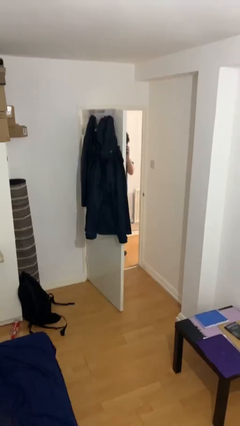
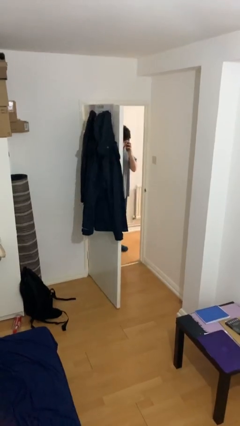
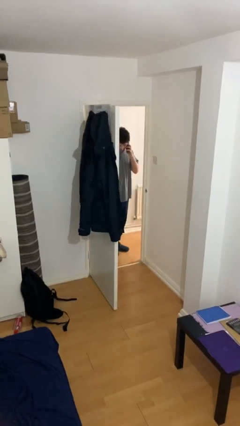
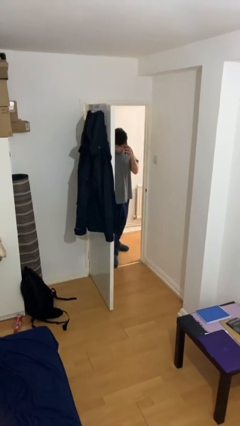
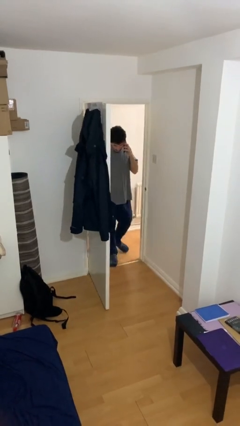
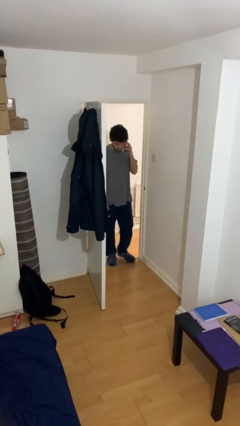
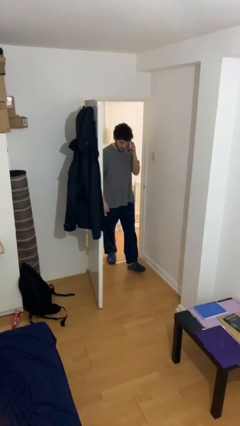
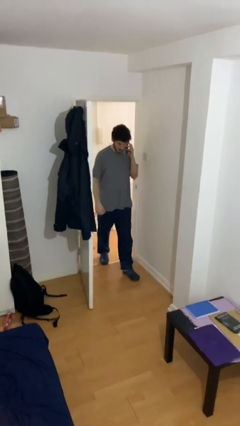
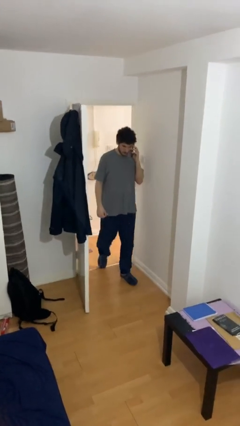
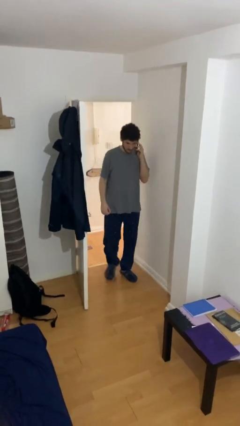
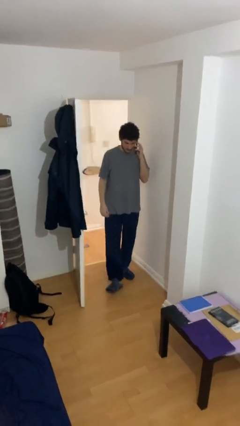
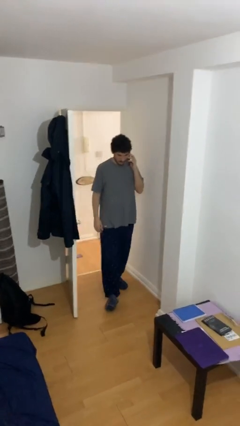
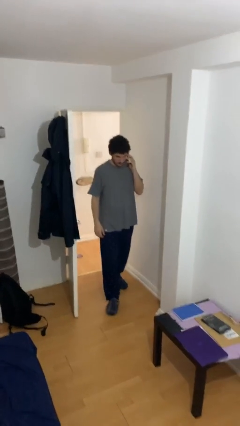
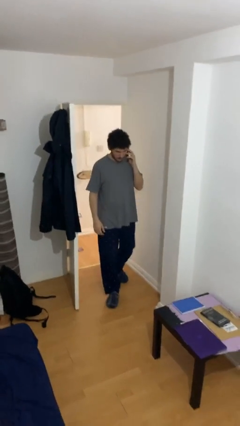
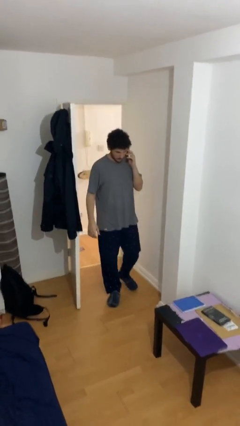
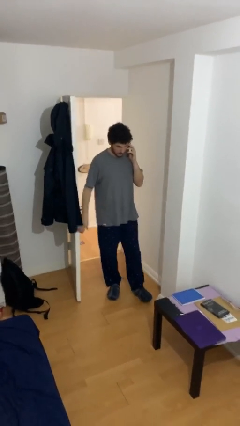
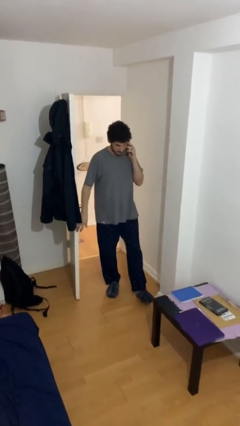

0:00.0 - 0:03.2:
person enters scene through structure

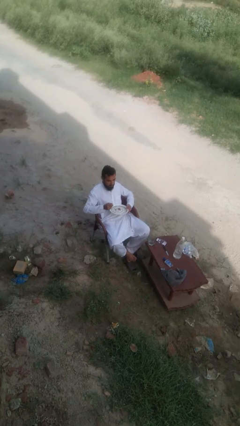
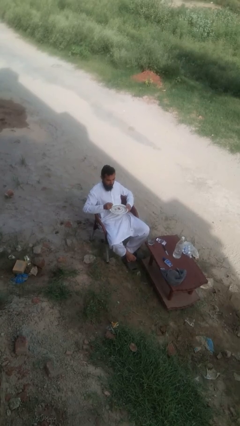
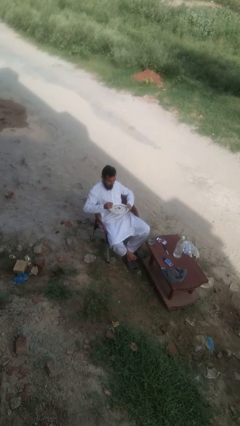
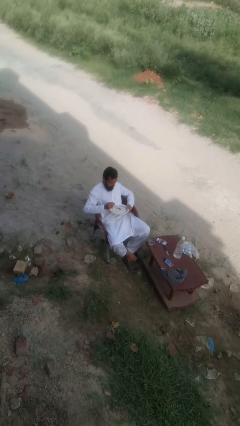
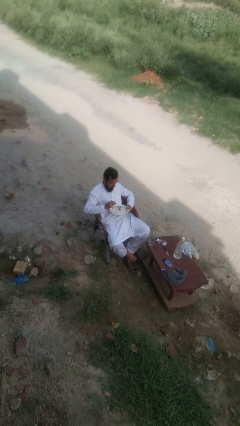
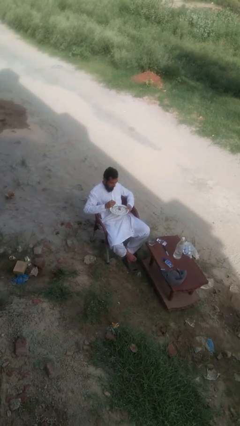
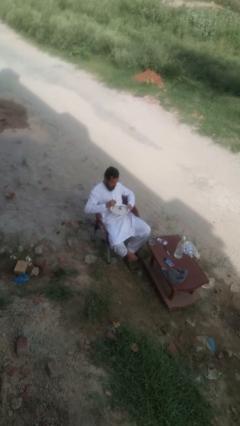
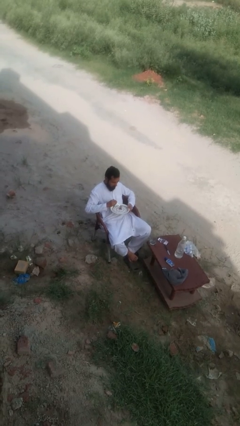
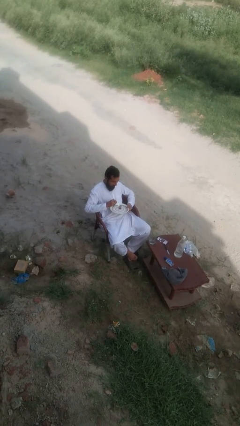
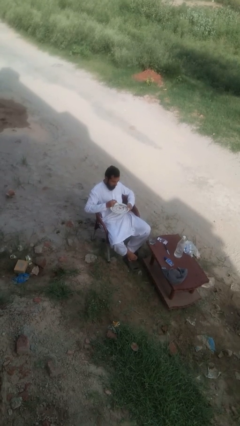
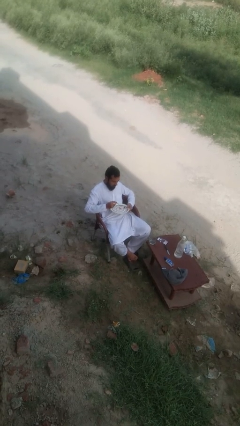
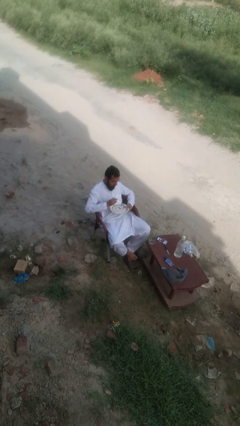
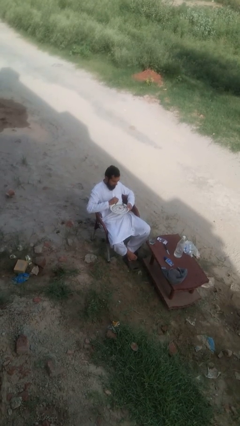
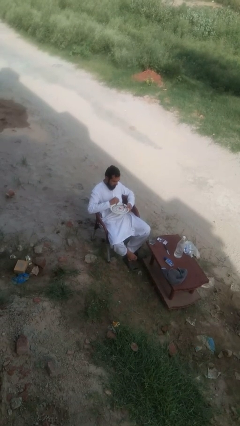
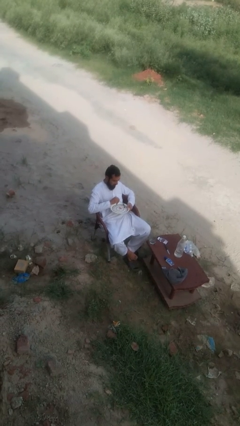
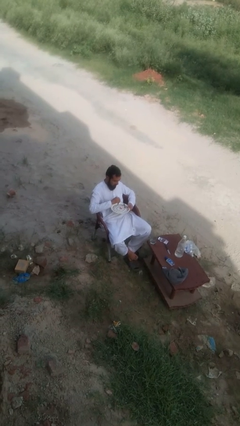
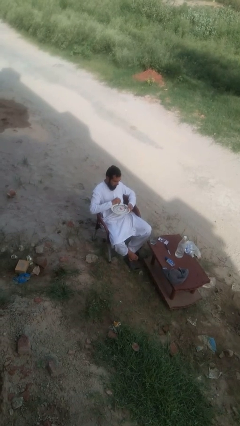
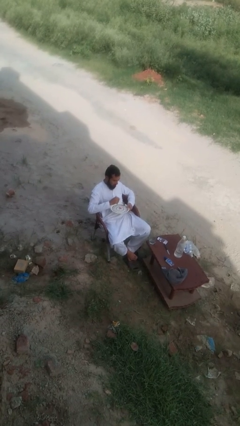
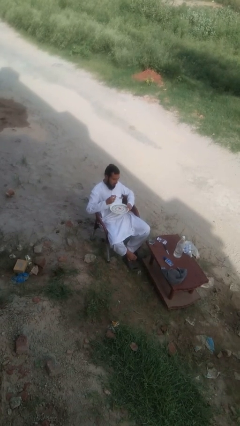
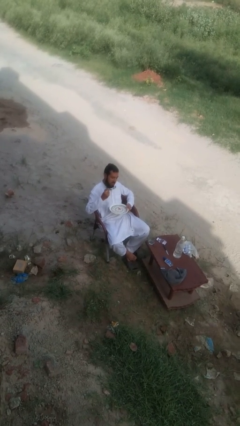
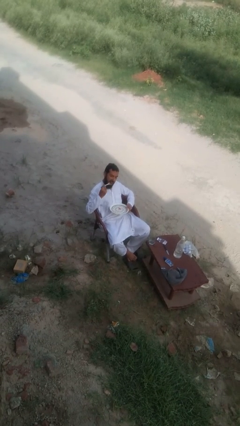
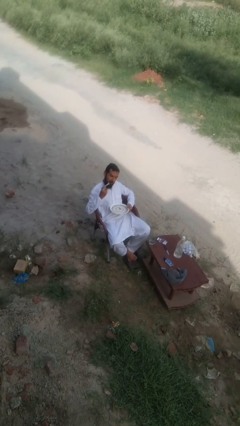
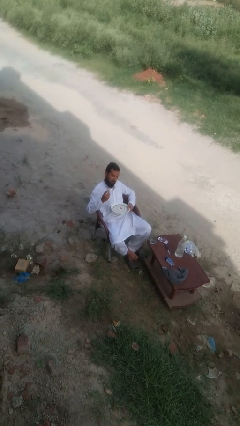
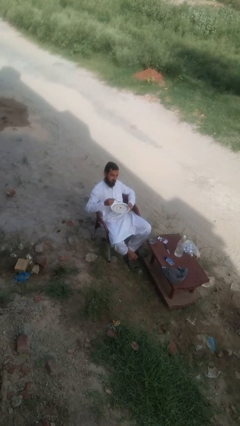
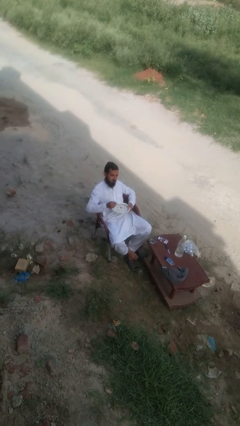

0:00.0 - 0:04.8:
person eats with utensil

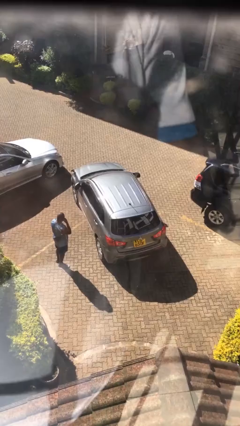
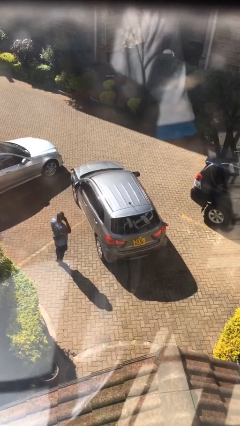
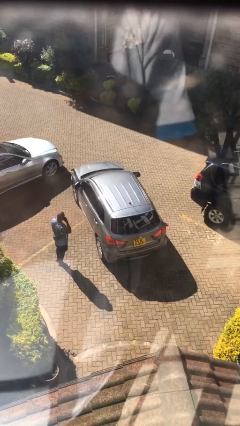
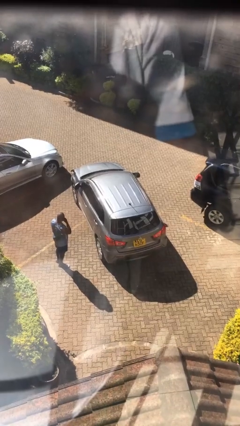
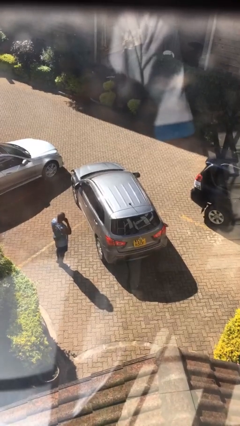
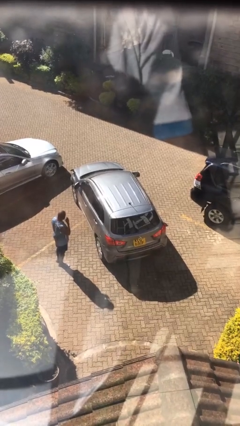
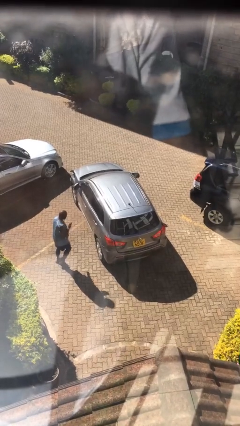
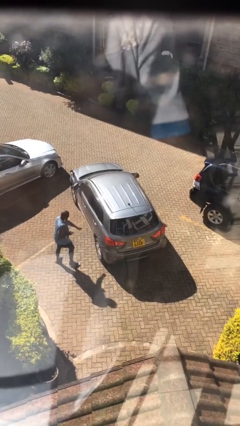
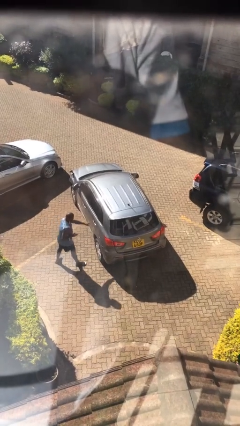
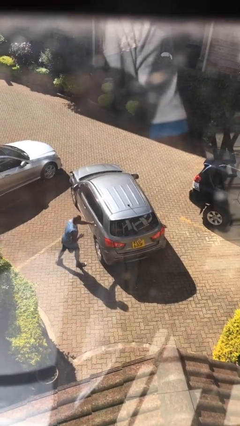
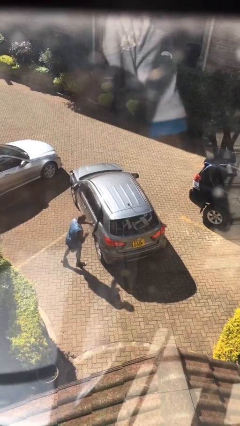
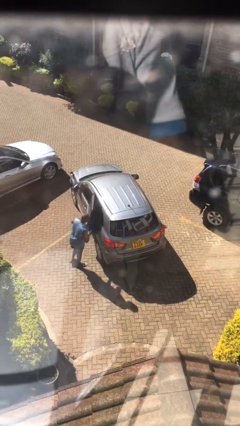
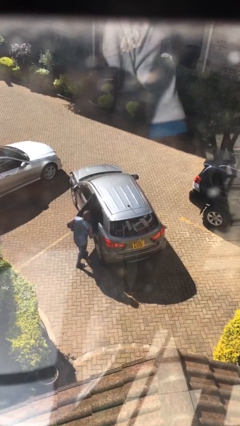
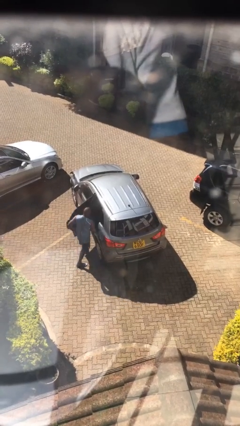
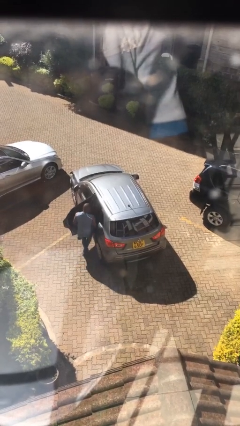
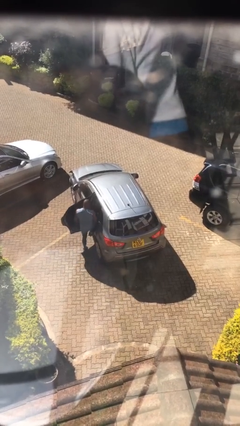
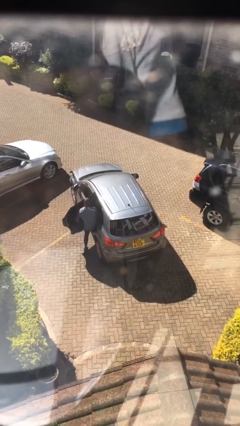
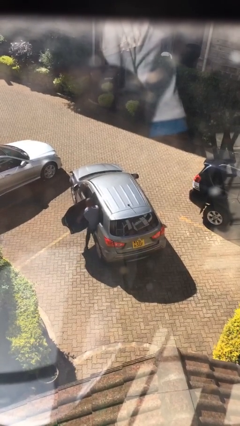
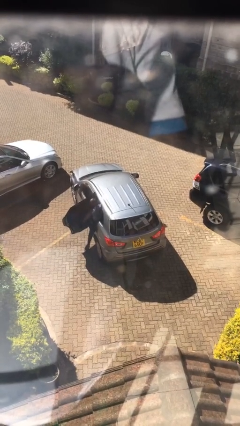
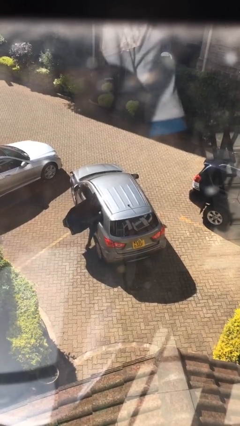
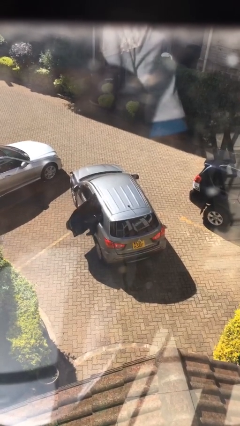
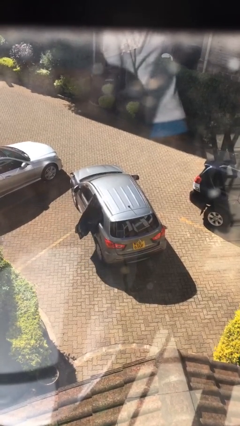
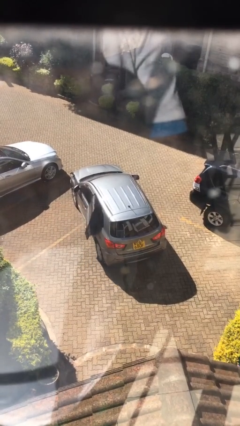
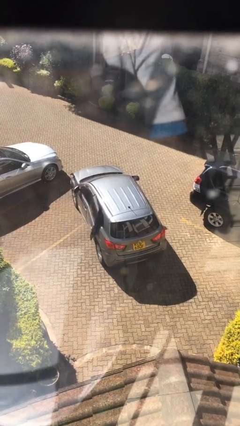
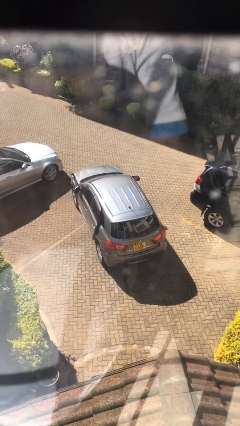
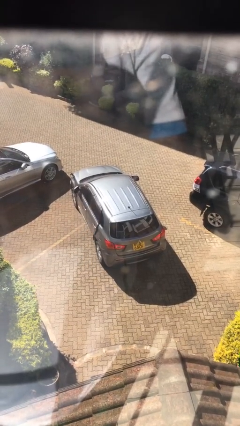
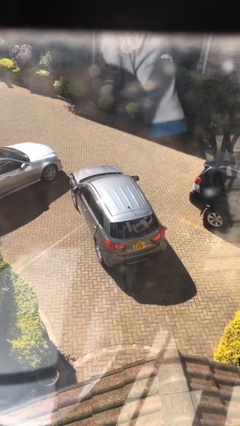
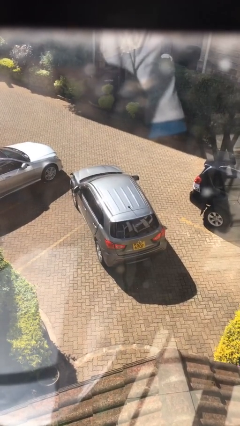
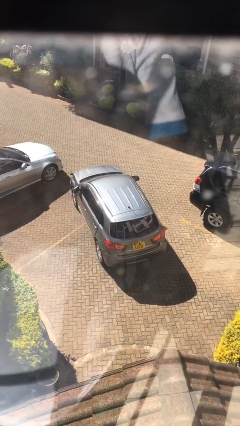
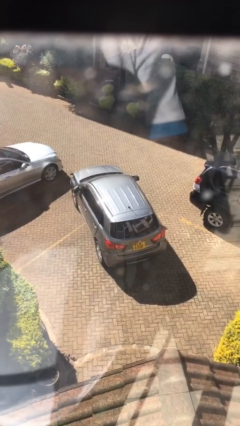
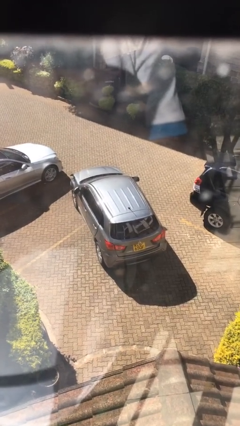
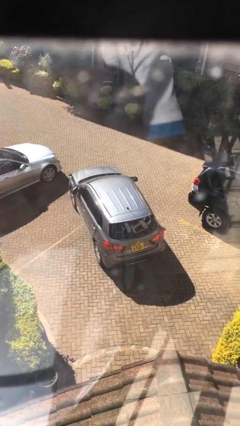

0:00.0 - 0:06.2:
car picks up person

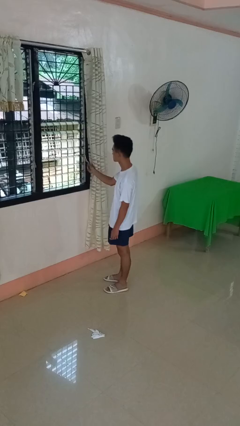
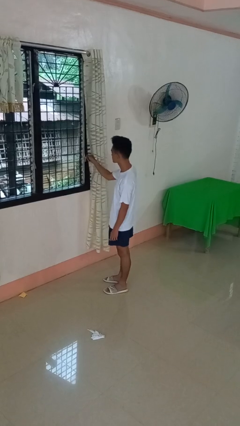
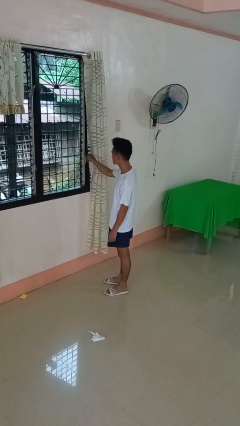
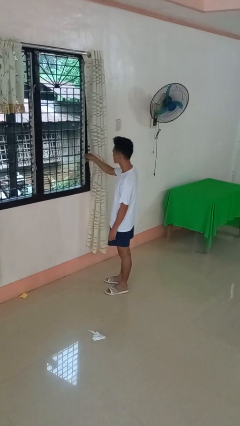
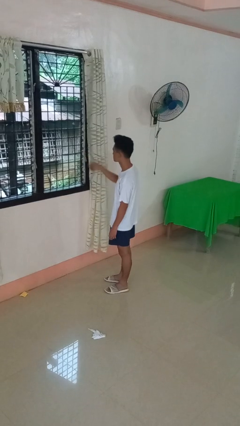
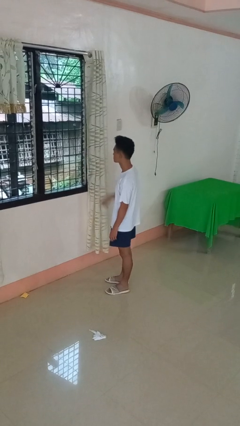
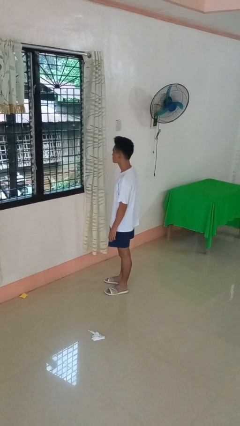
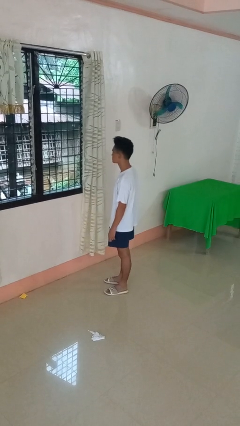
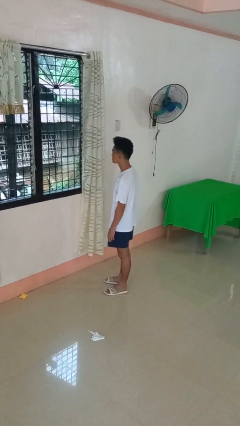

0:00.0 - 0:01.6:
person closes home window

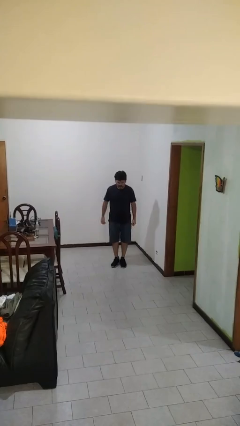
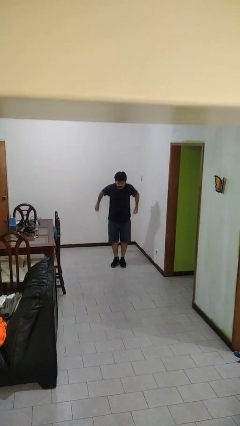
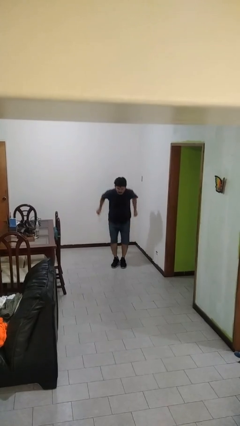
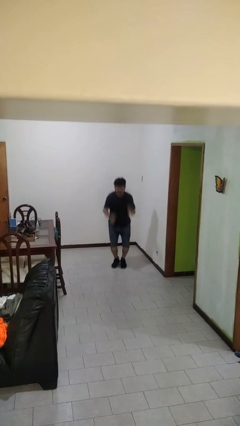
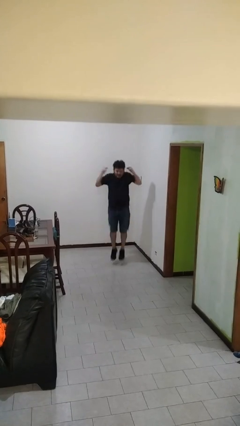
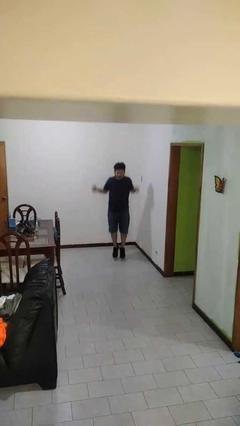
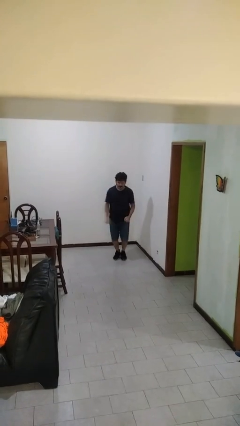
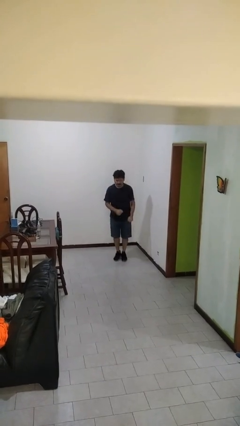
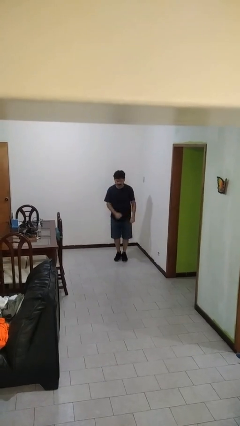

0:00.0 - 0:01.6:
person jumps
